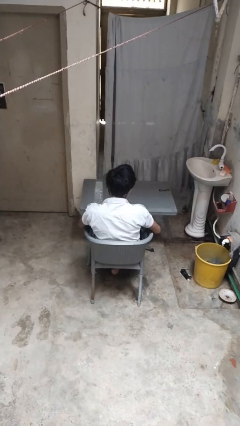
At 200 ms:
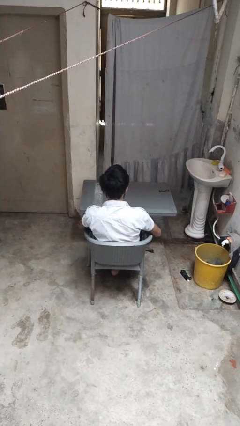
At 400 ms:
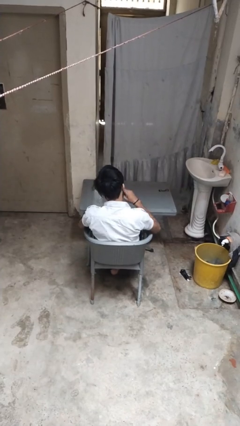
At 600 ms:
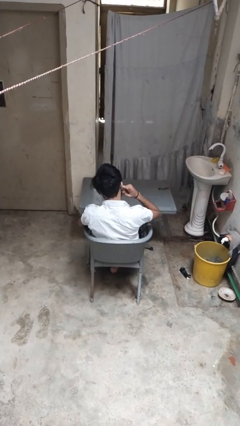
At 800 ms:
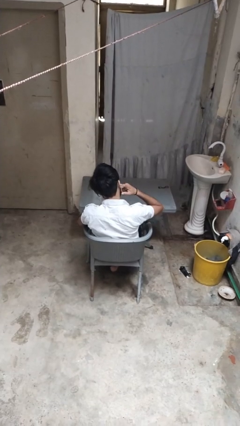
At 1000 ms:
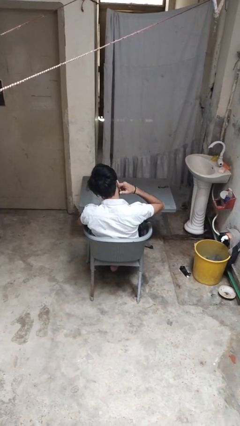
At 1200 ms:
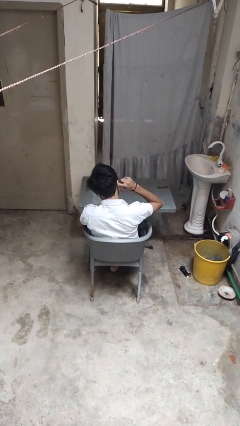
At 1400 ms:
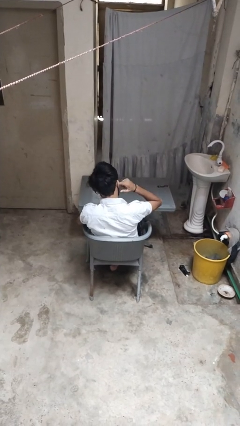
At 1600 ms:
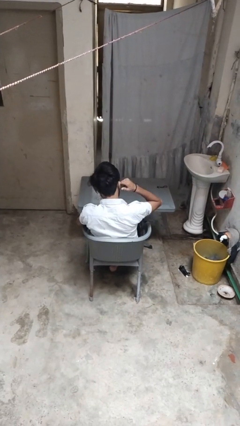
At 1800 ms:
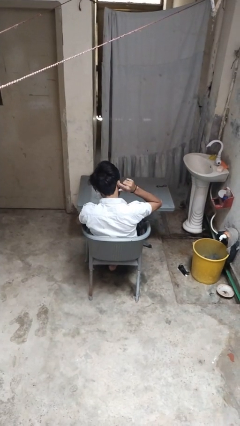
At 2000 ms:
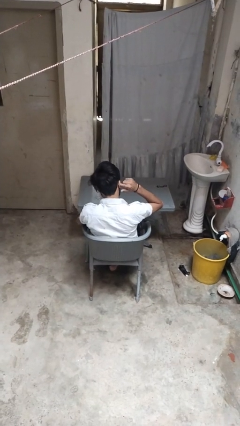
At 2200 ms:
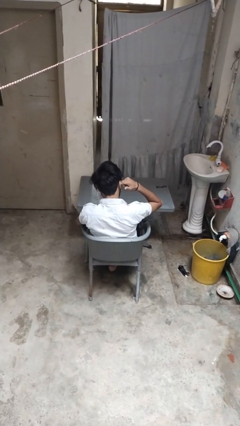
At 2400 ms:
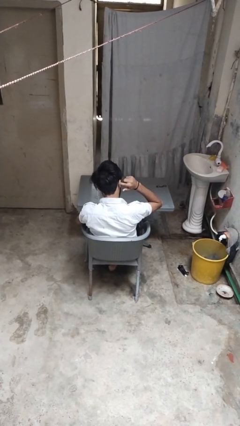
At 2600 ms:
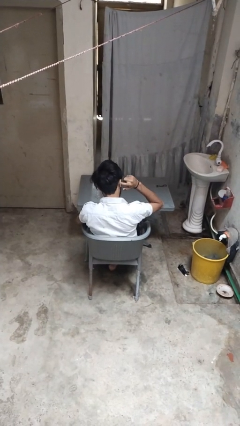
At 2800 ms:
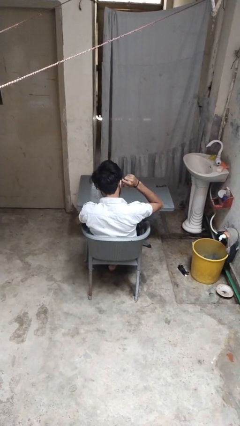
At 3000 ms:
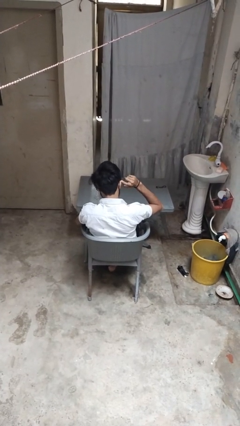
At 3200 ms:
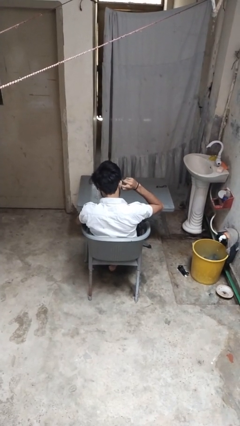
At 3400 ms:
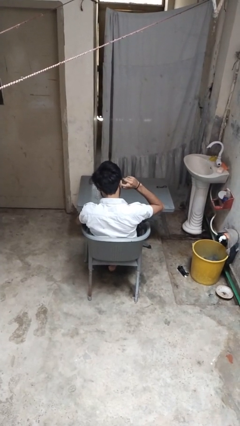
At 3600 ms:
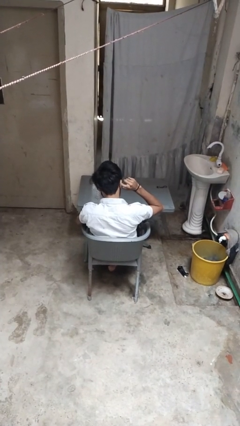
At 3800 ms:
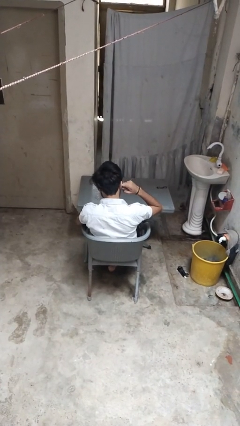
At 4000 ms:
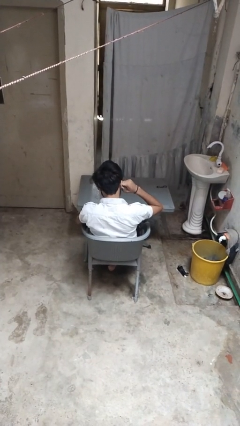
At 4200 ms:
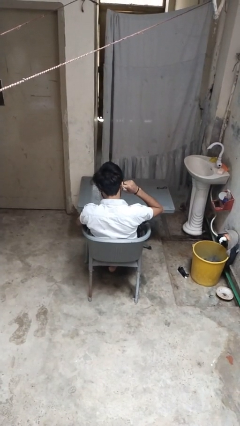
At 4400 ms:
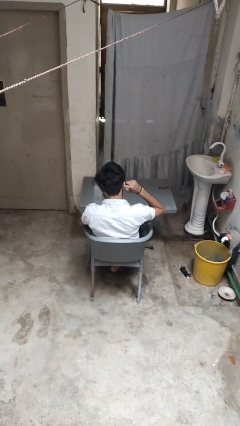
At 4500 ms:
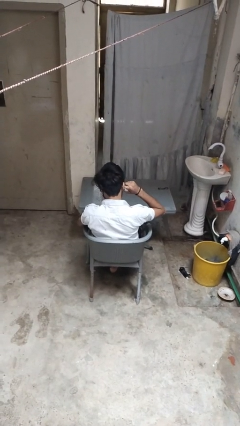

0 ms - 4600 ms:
person puts fingers in ear

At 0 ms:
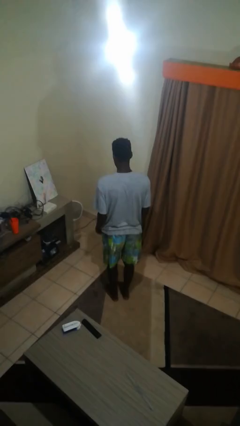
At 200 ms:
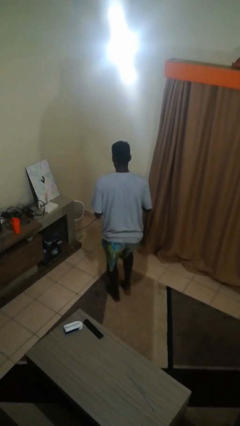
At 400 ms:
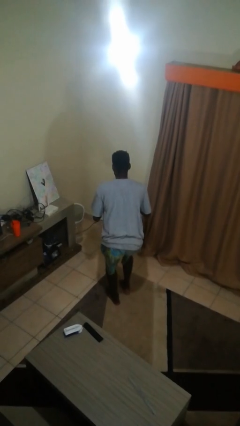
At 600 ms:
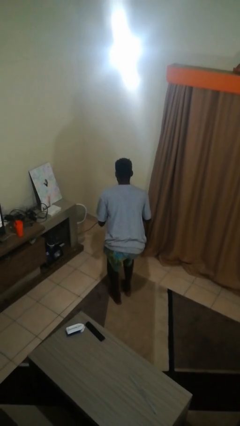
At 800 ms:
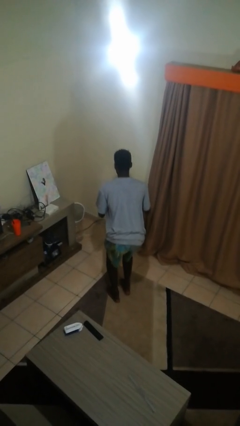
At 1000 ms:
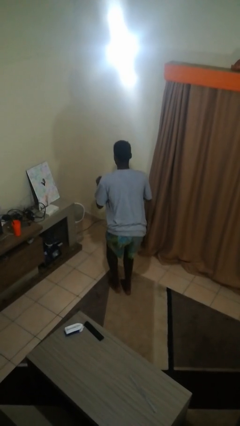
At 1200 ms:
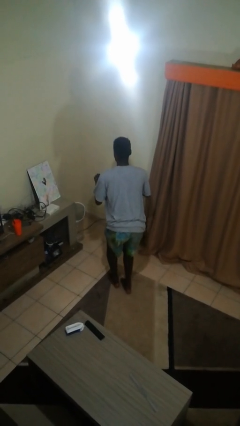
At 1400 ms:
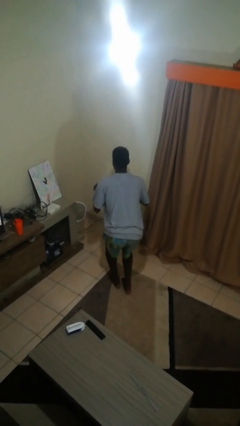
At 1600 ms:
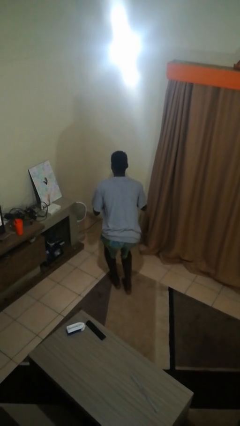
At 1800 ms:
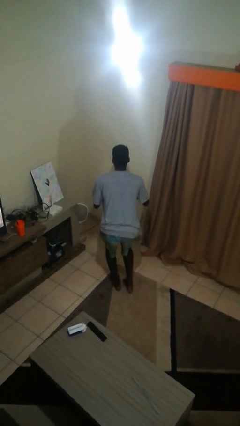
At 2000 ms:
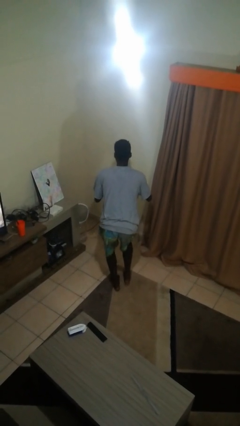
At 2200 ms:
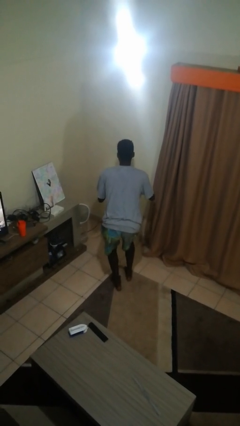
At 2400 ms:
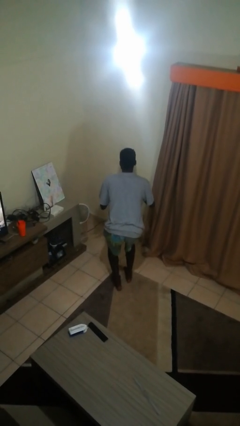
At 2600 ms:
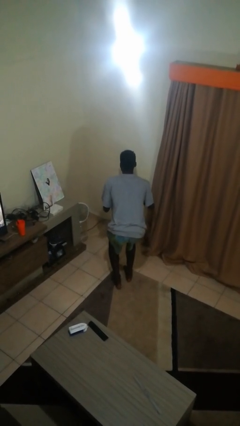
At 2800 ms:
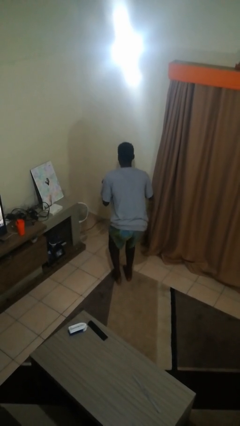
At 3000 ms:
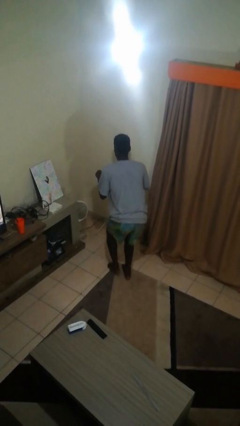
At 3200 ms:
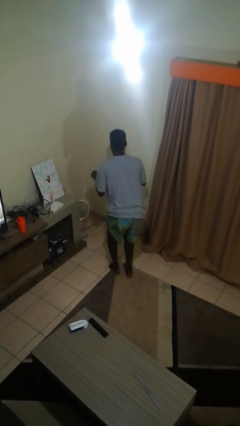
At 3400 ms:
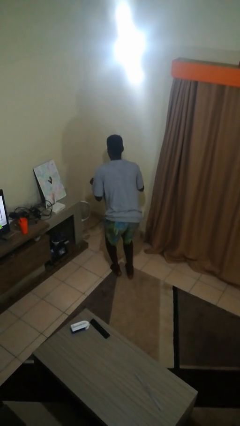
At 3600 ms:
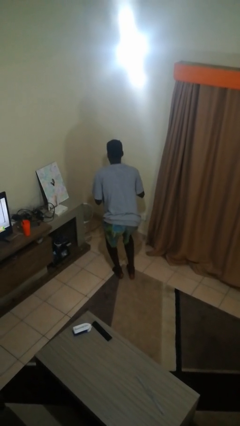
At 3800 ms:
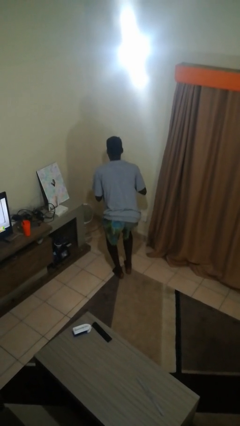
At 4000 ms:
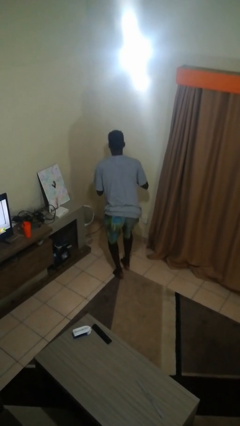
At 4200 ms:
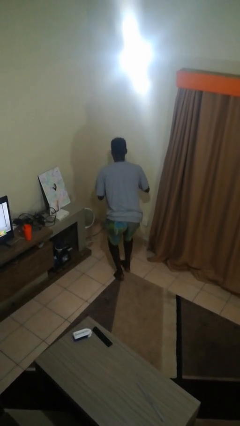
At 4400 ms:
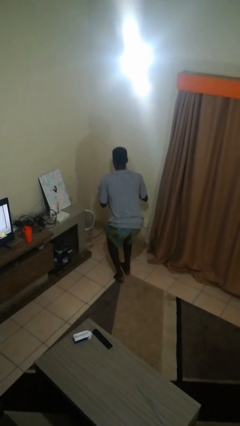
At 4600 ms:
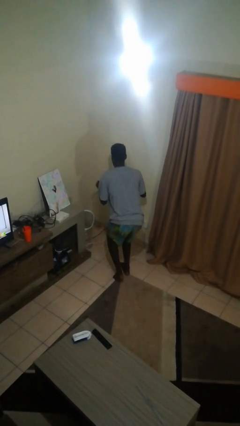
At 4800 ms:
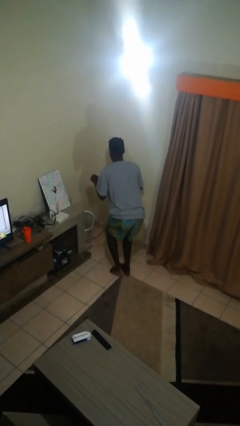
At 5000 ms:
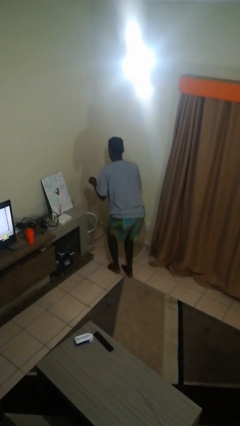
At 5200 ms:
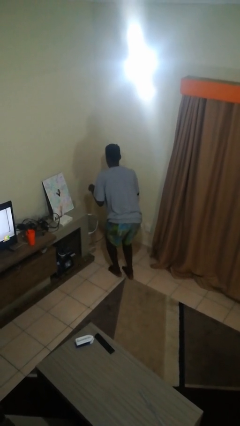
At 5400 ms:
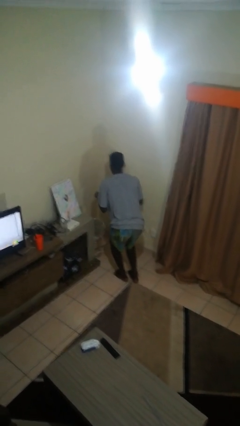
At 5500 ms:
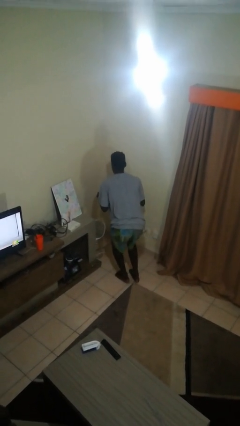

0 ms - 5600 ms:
person walks tiptoe

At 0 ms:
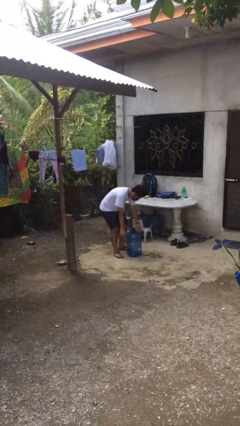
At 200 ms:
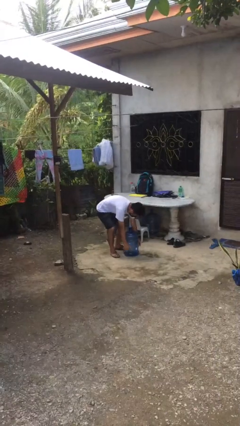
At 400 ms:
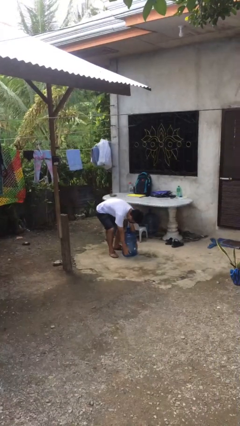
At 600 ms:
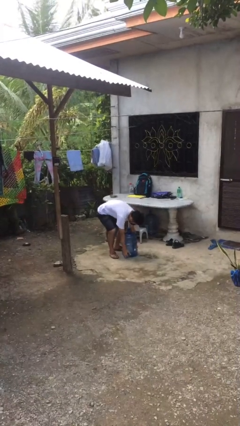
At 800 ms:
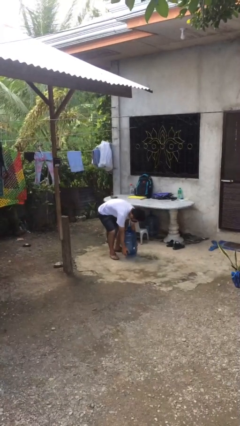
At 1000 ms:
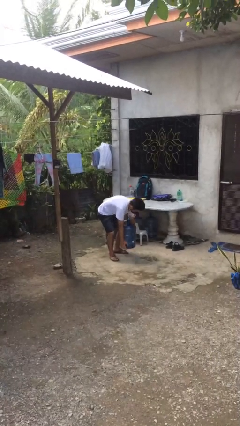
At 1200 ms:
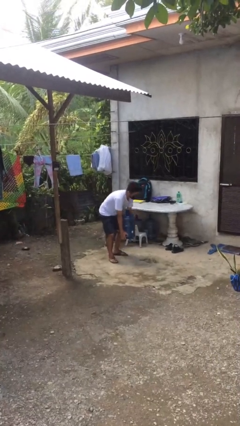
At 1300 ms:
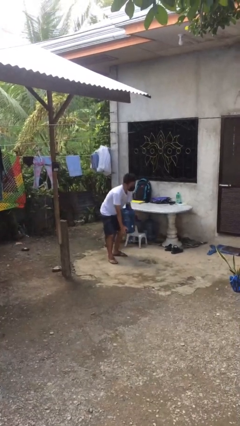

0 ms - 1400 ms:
person picks up object from floor

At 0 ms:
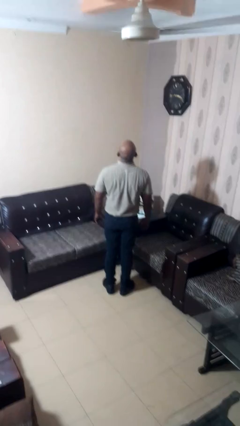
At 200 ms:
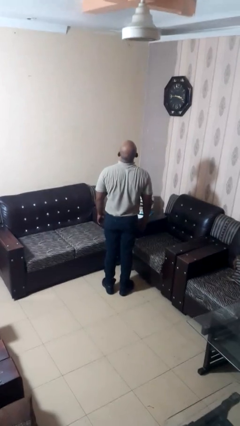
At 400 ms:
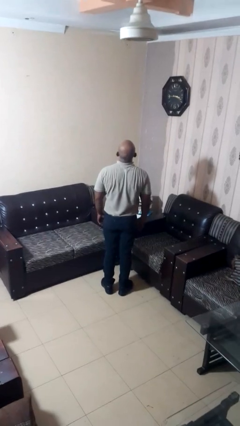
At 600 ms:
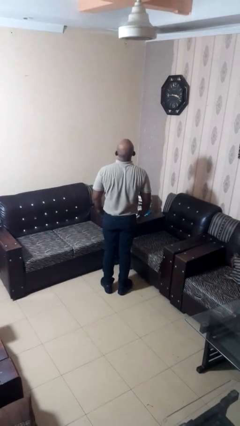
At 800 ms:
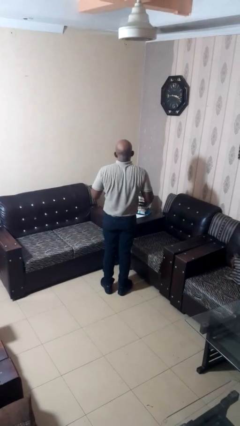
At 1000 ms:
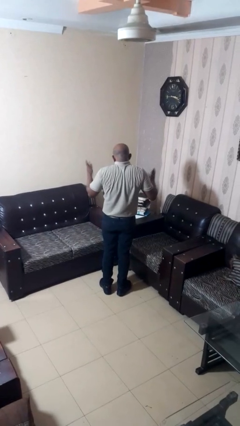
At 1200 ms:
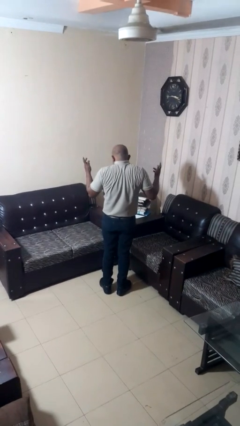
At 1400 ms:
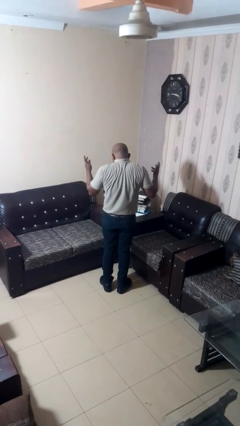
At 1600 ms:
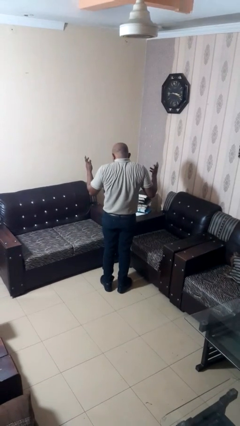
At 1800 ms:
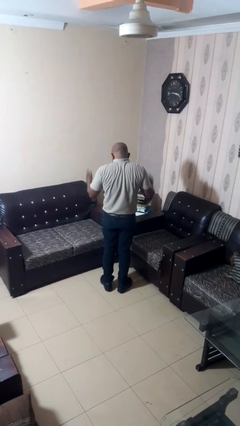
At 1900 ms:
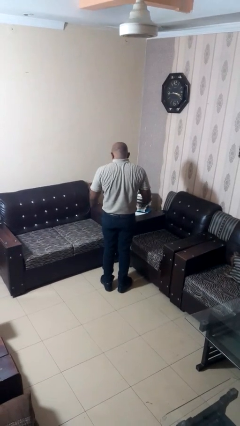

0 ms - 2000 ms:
person shrugs

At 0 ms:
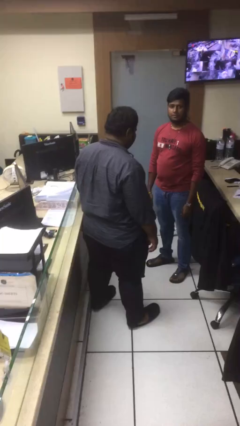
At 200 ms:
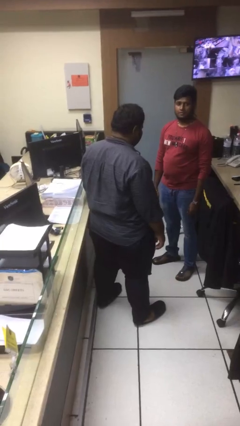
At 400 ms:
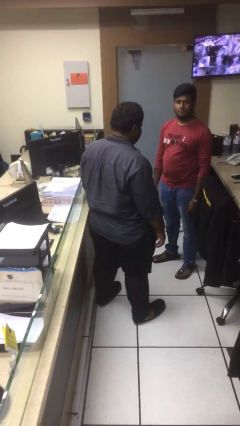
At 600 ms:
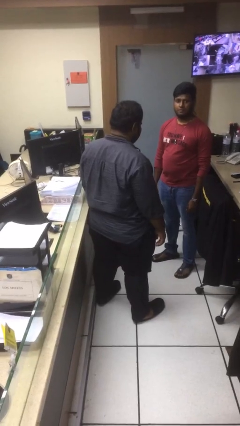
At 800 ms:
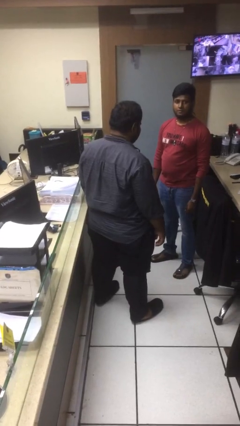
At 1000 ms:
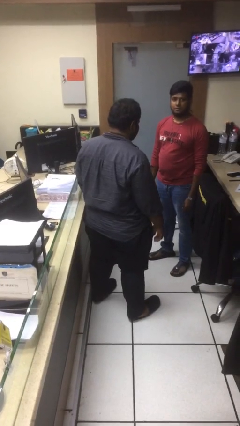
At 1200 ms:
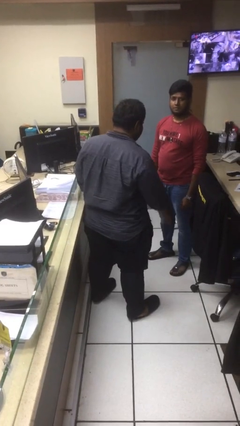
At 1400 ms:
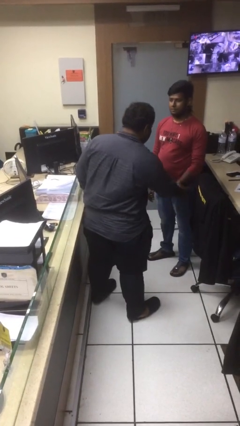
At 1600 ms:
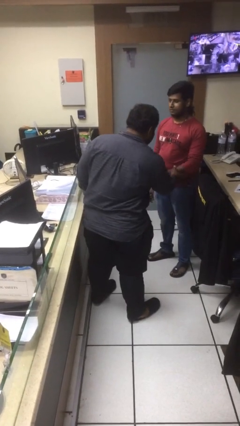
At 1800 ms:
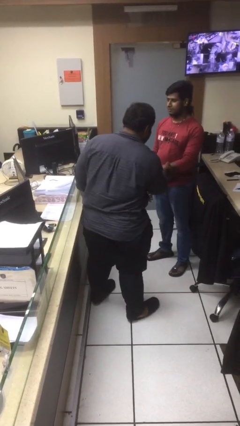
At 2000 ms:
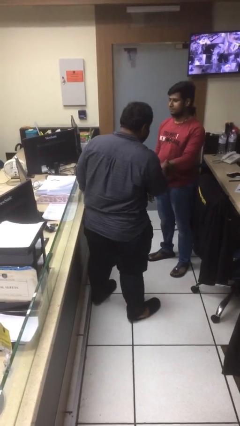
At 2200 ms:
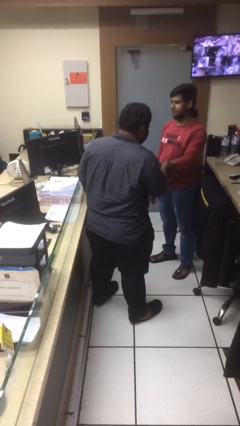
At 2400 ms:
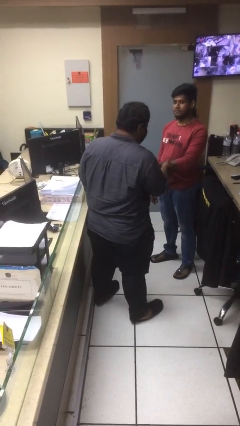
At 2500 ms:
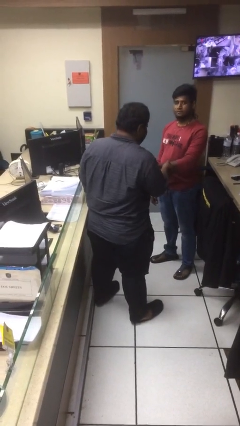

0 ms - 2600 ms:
person grabs person by forearm

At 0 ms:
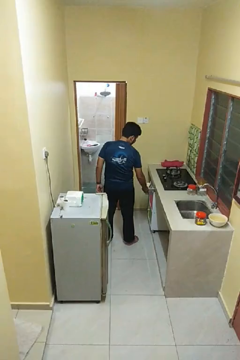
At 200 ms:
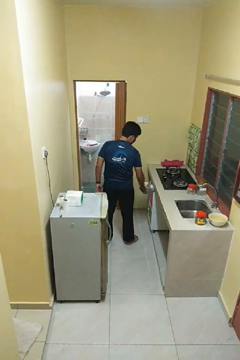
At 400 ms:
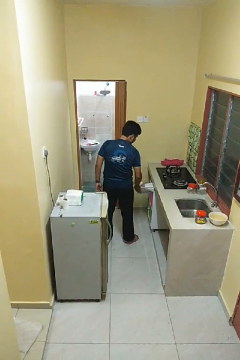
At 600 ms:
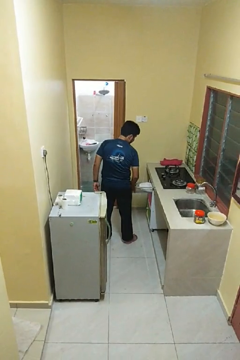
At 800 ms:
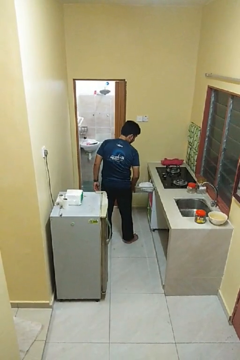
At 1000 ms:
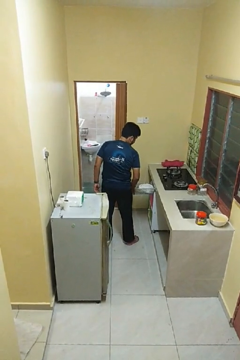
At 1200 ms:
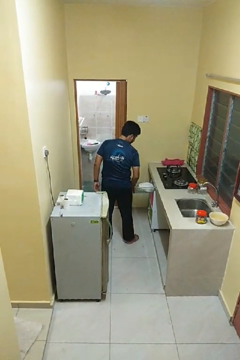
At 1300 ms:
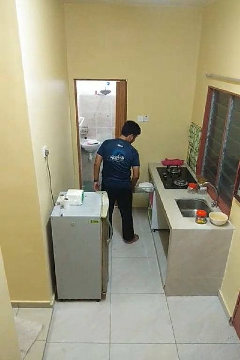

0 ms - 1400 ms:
person opens kitchen drawer
